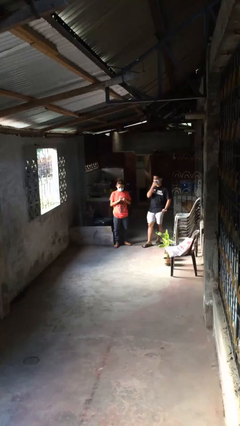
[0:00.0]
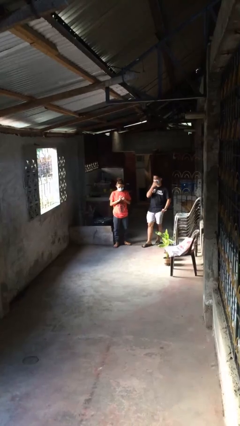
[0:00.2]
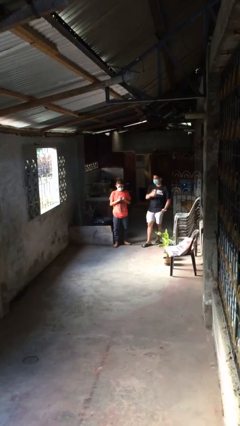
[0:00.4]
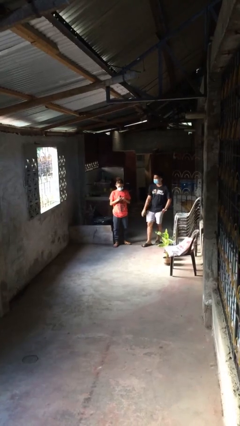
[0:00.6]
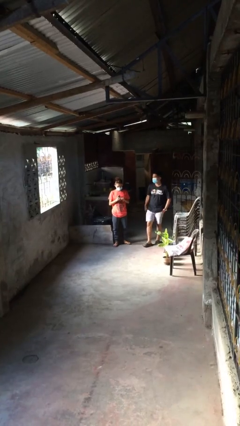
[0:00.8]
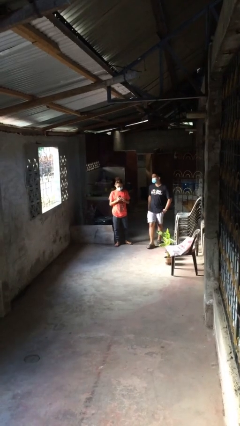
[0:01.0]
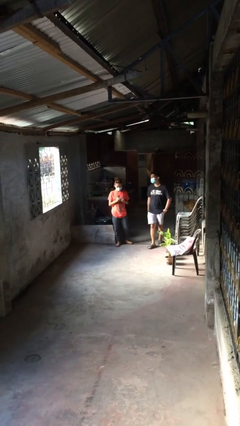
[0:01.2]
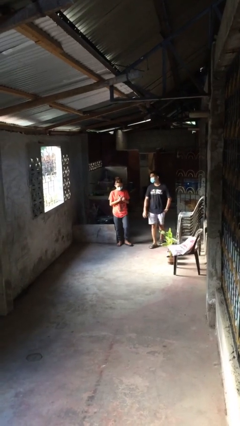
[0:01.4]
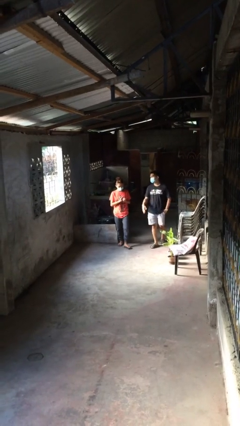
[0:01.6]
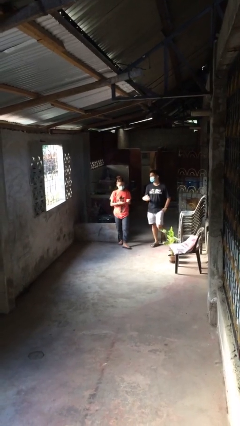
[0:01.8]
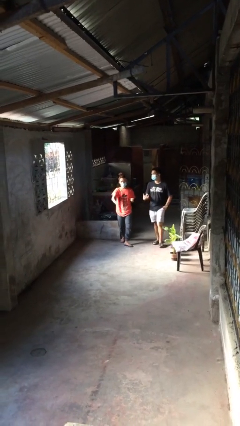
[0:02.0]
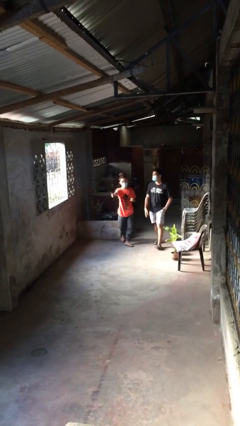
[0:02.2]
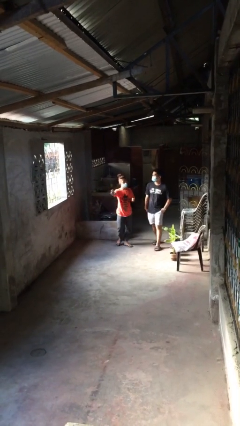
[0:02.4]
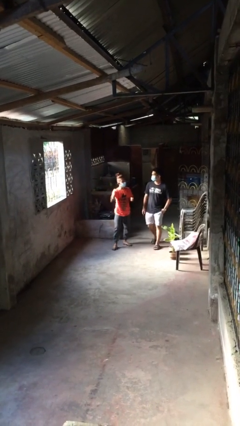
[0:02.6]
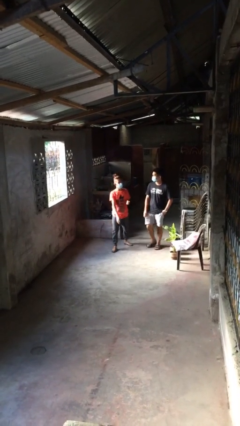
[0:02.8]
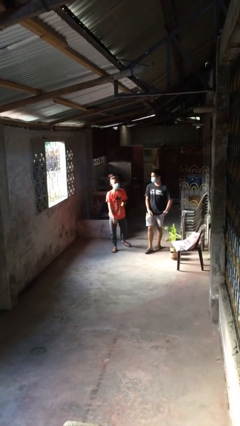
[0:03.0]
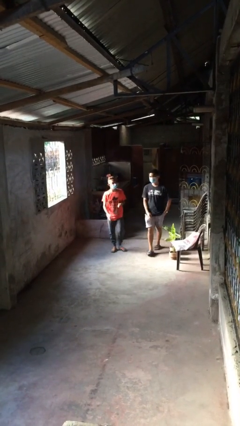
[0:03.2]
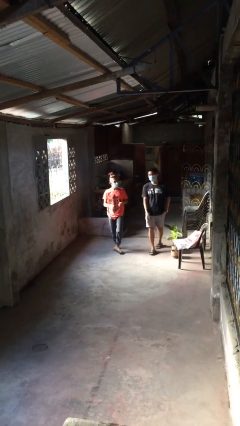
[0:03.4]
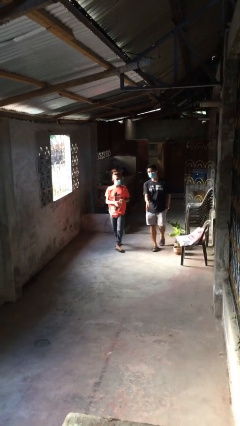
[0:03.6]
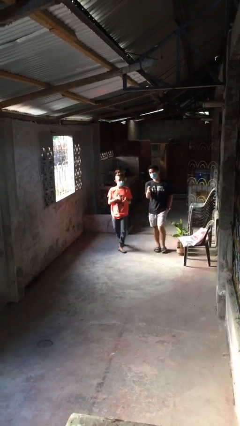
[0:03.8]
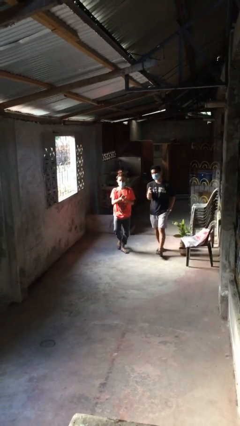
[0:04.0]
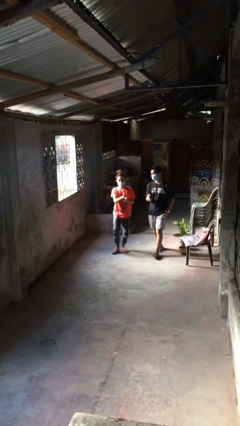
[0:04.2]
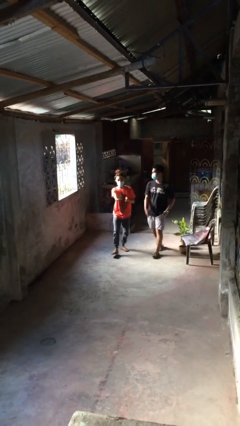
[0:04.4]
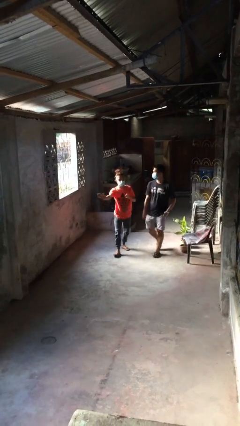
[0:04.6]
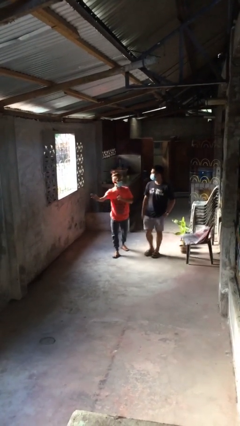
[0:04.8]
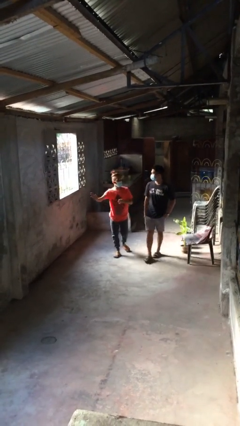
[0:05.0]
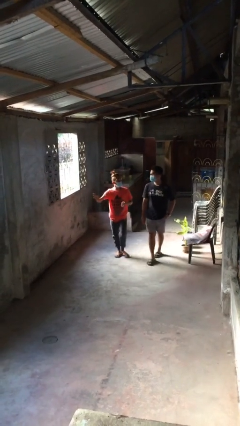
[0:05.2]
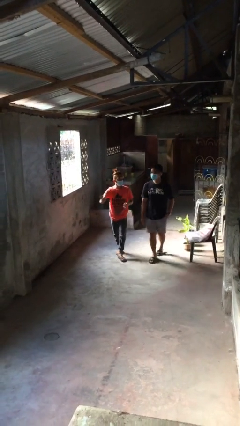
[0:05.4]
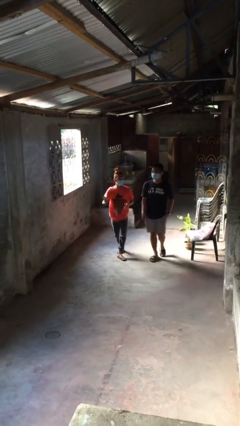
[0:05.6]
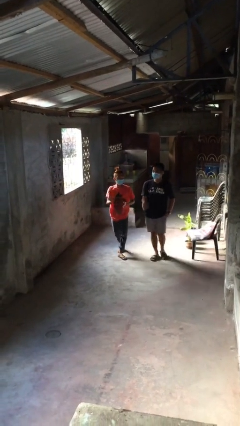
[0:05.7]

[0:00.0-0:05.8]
person talks to person

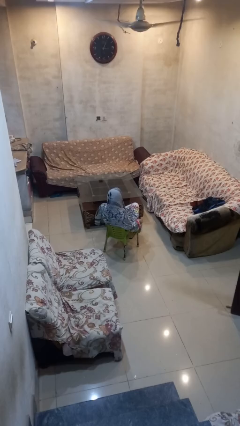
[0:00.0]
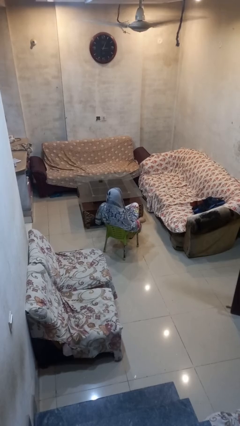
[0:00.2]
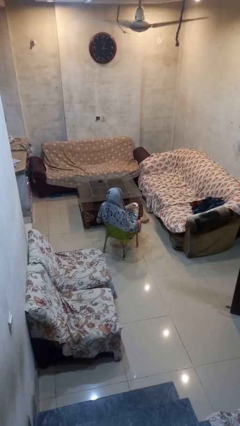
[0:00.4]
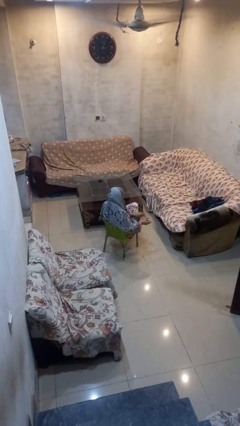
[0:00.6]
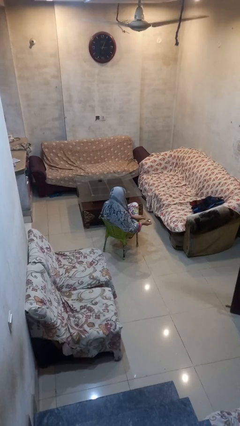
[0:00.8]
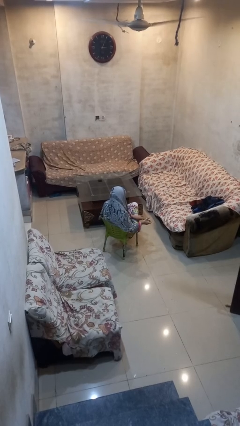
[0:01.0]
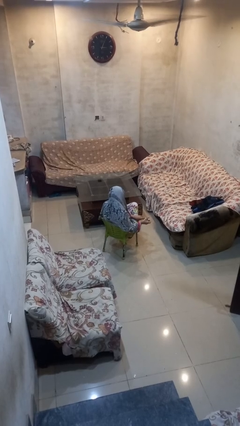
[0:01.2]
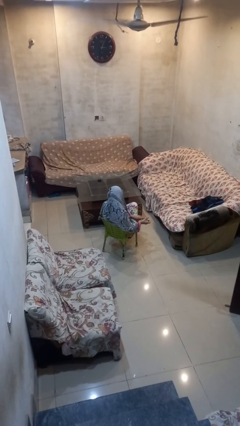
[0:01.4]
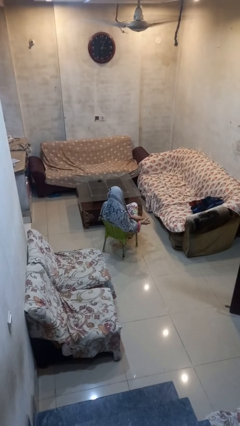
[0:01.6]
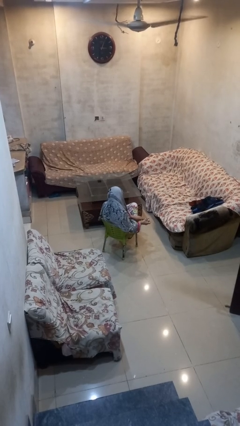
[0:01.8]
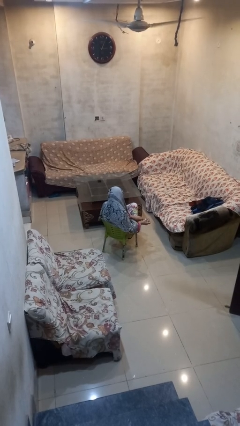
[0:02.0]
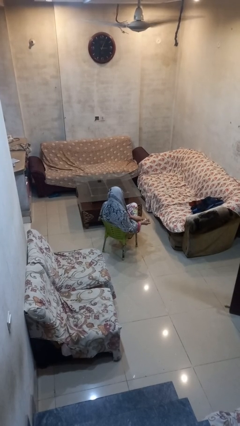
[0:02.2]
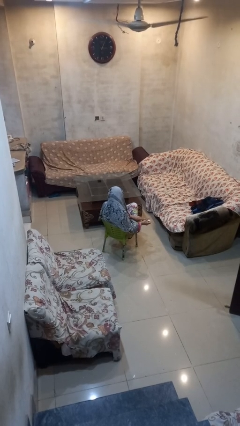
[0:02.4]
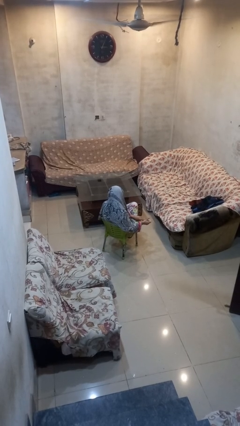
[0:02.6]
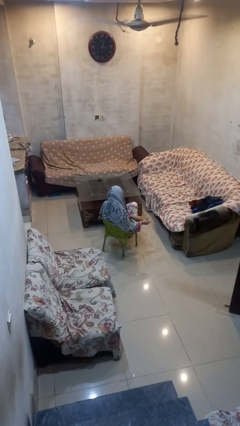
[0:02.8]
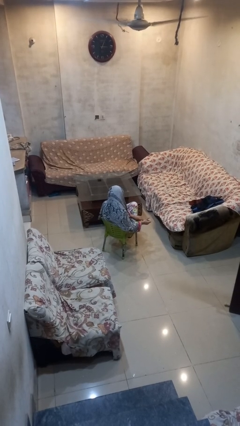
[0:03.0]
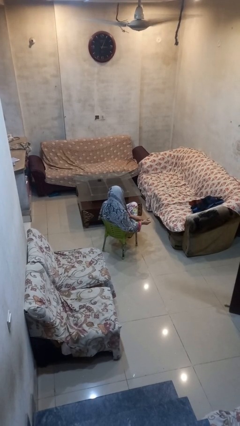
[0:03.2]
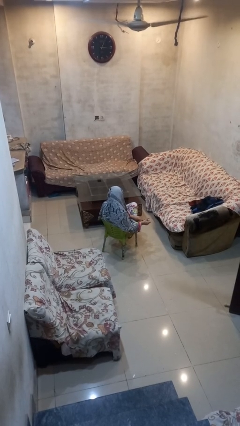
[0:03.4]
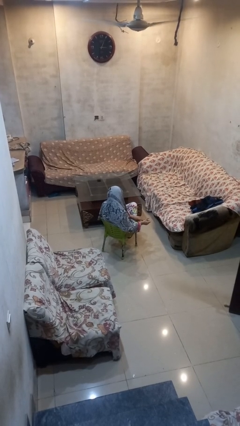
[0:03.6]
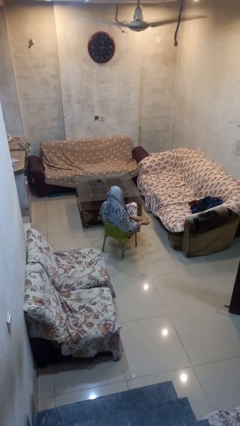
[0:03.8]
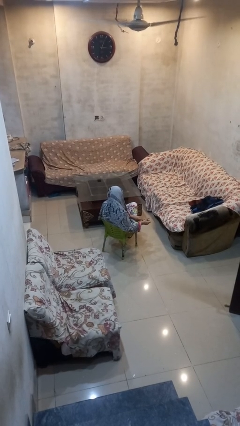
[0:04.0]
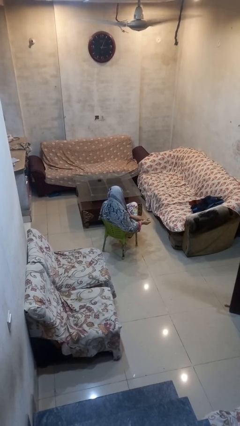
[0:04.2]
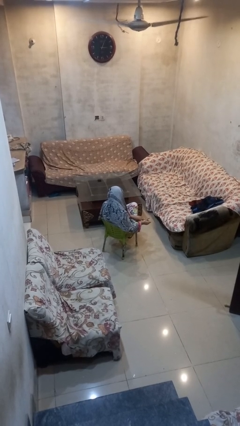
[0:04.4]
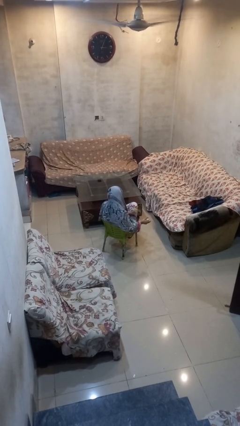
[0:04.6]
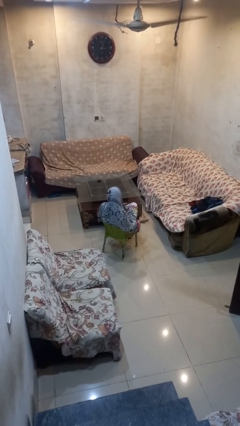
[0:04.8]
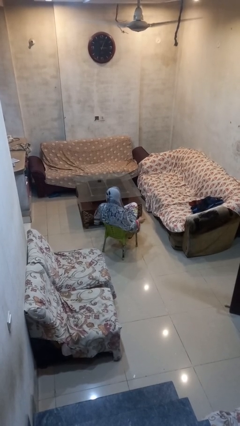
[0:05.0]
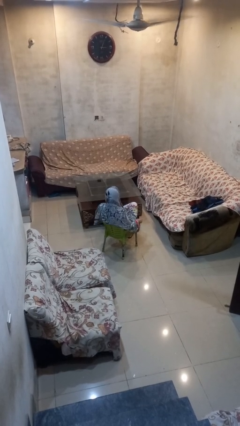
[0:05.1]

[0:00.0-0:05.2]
person clips fingernails

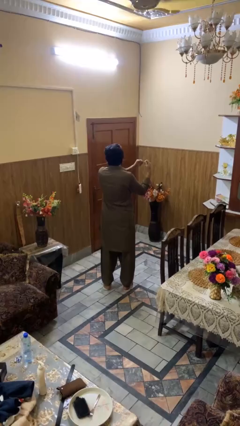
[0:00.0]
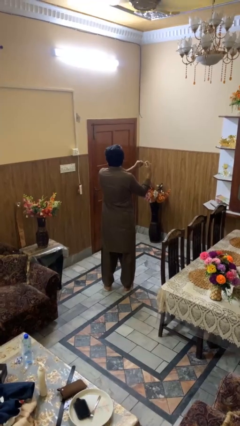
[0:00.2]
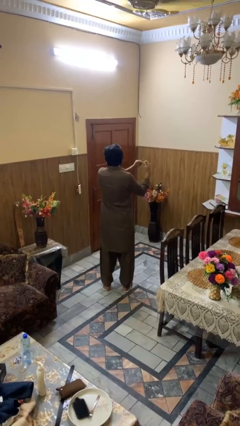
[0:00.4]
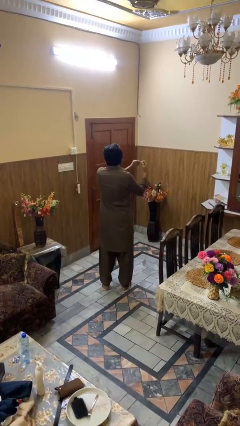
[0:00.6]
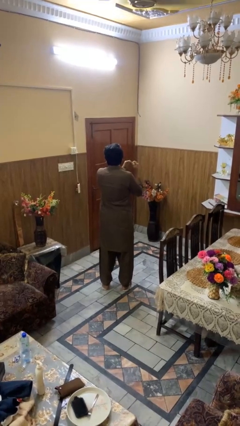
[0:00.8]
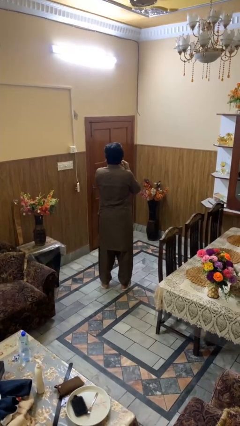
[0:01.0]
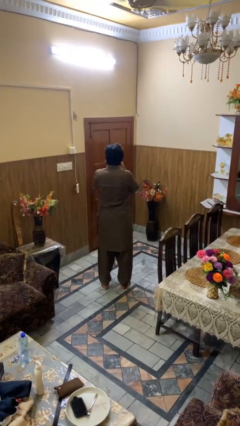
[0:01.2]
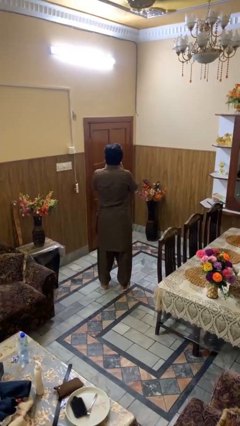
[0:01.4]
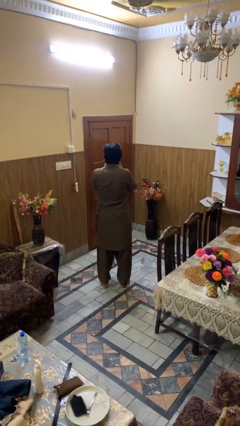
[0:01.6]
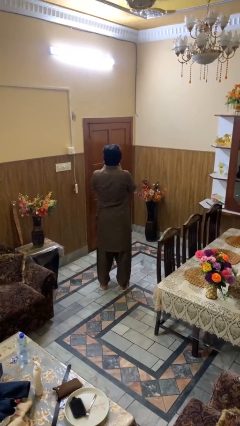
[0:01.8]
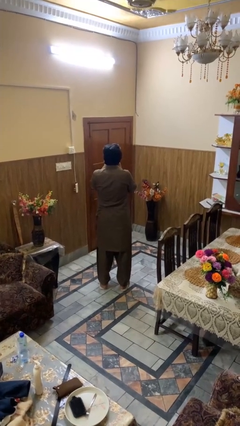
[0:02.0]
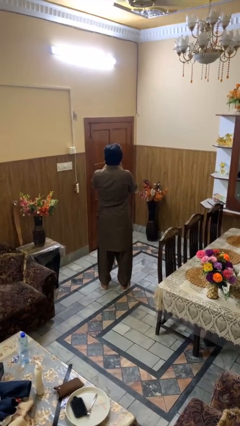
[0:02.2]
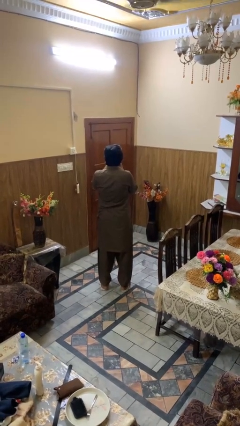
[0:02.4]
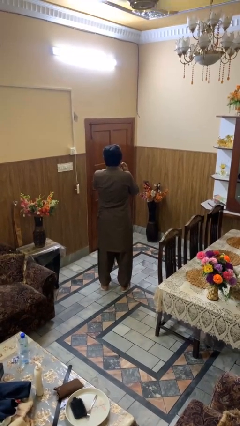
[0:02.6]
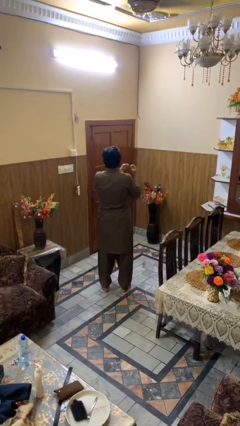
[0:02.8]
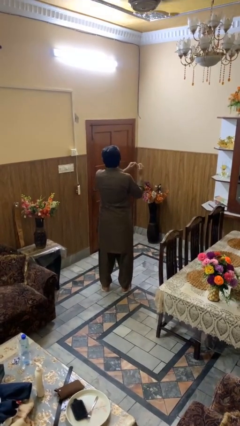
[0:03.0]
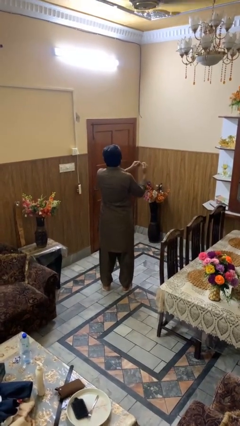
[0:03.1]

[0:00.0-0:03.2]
person flosses

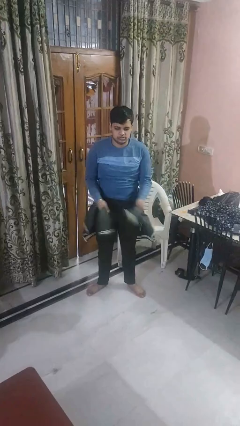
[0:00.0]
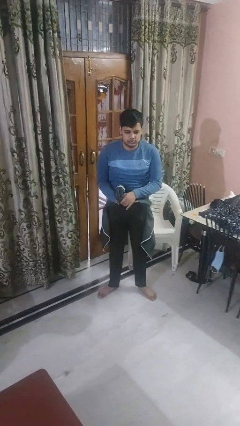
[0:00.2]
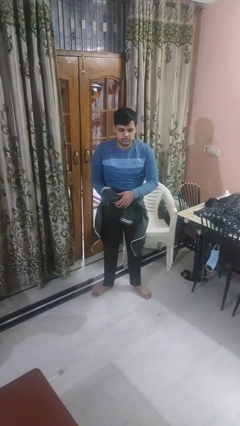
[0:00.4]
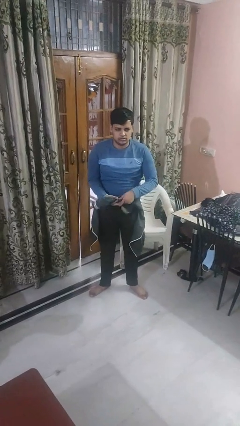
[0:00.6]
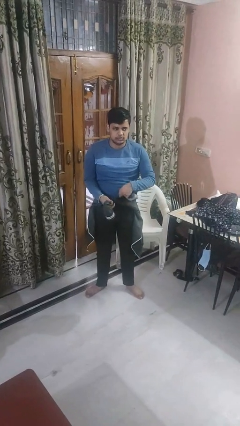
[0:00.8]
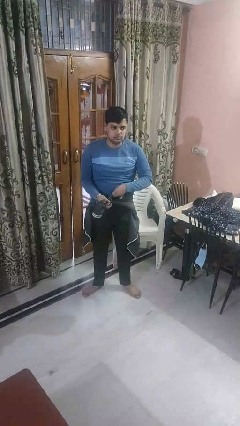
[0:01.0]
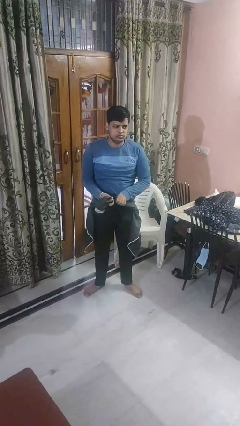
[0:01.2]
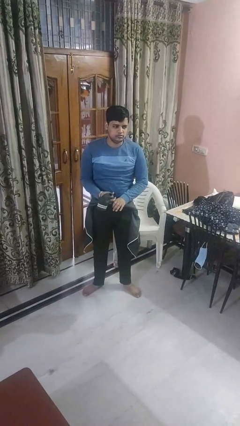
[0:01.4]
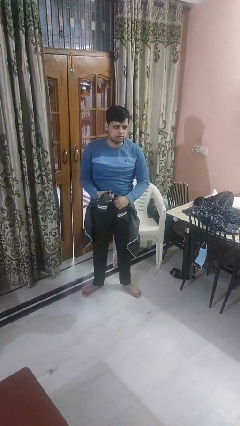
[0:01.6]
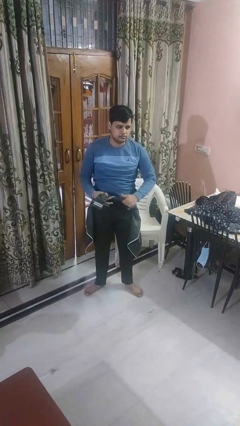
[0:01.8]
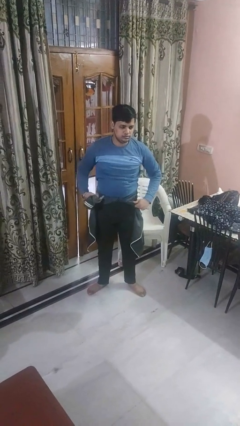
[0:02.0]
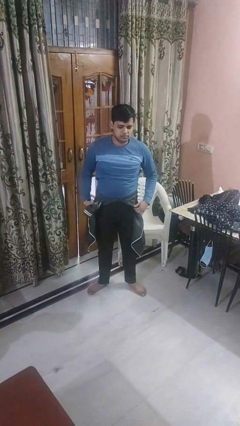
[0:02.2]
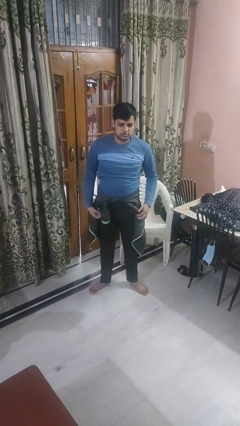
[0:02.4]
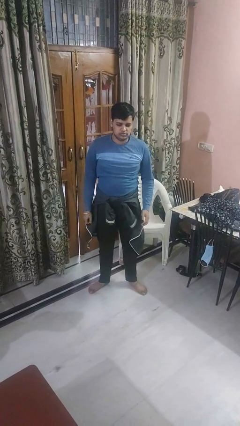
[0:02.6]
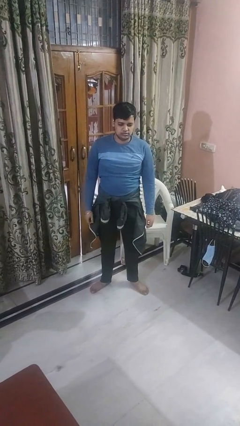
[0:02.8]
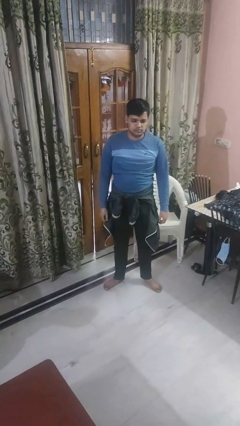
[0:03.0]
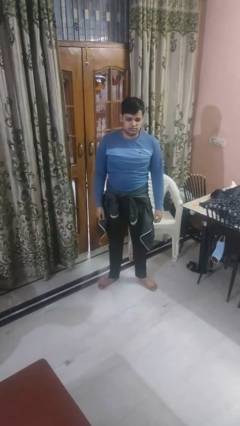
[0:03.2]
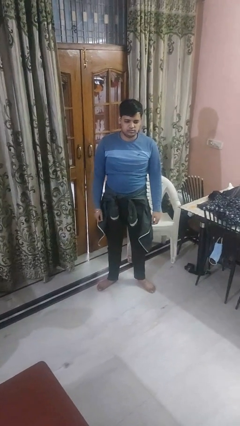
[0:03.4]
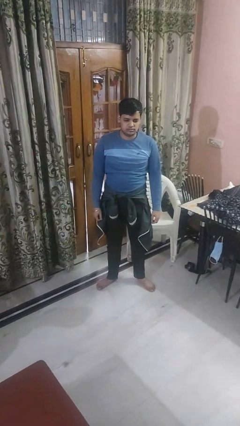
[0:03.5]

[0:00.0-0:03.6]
person ties jacket around waist
